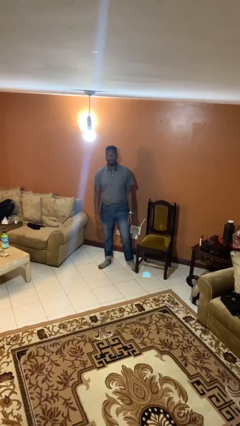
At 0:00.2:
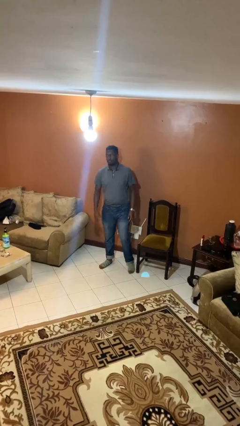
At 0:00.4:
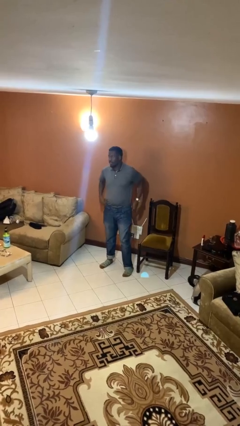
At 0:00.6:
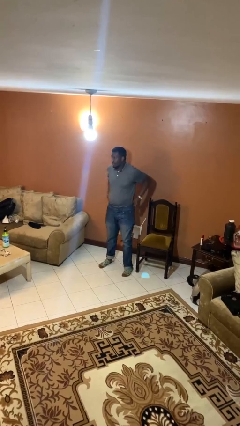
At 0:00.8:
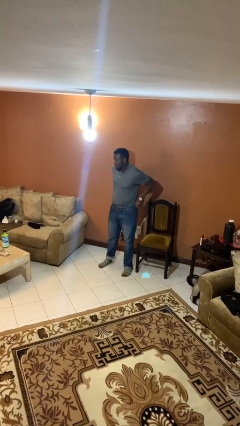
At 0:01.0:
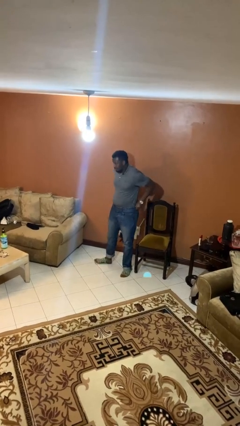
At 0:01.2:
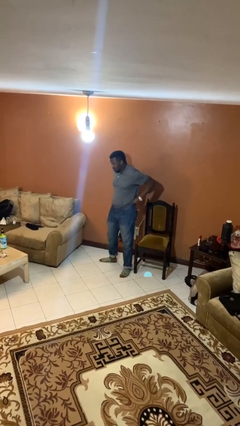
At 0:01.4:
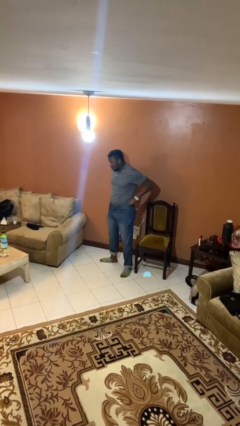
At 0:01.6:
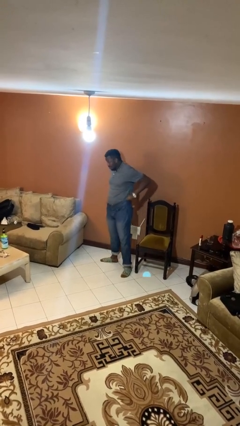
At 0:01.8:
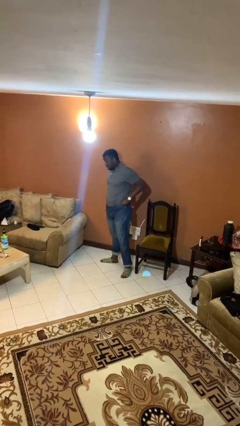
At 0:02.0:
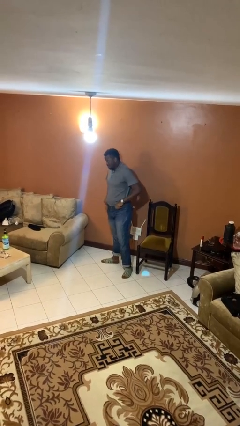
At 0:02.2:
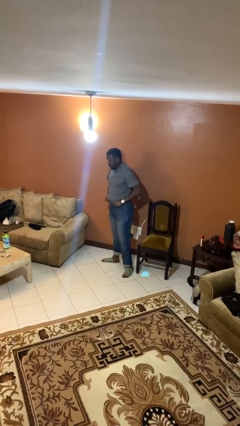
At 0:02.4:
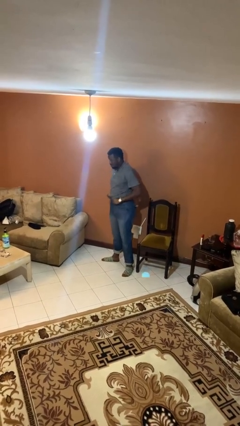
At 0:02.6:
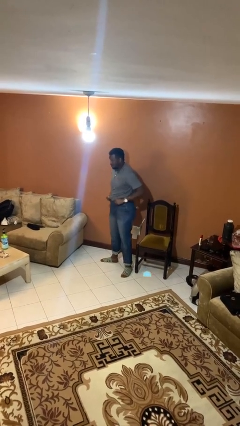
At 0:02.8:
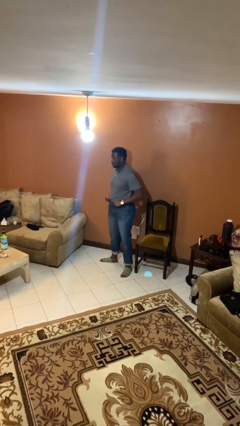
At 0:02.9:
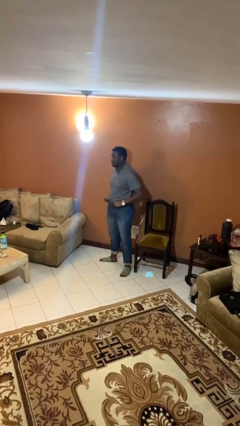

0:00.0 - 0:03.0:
person hikes up pants

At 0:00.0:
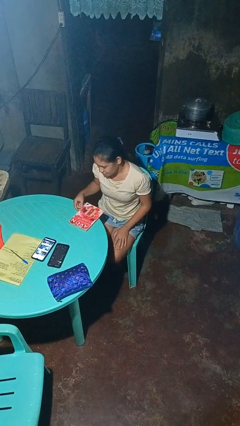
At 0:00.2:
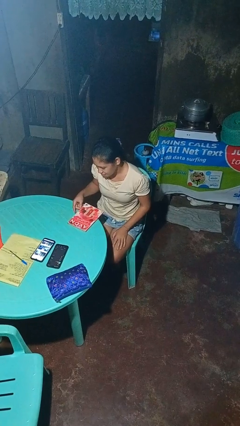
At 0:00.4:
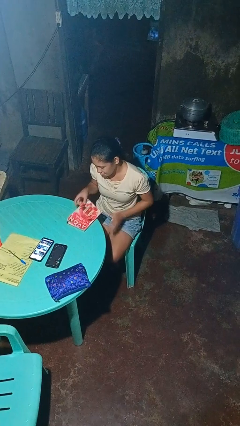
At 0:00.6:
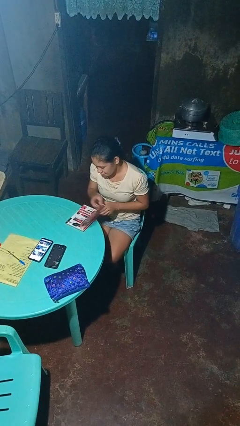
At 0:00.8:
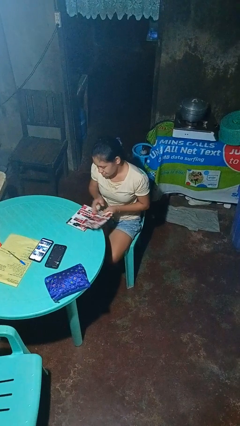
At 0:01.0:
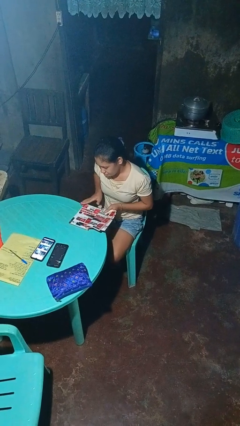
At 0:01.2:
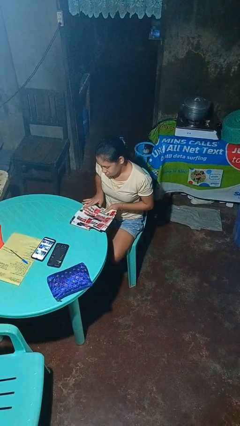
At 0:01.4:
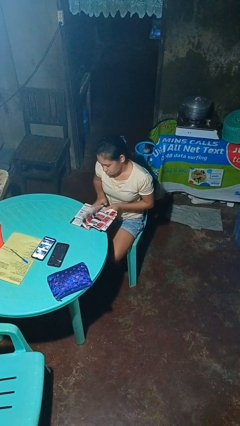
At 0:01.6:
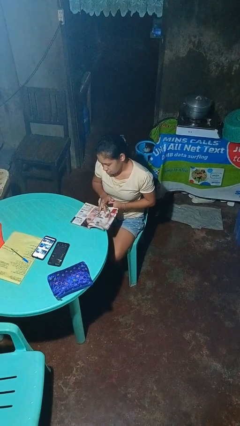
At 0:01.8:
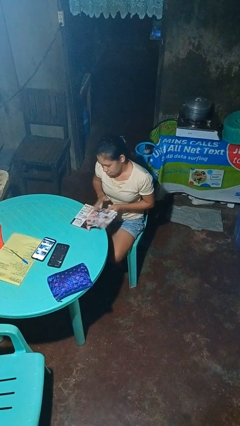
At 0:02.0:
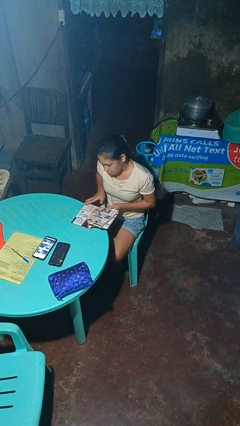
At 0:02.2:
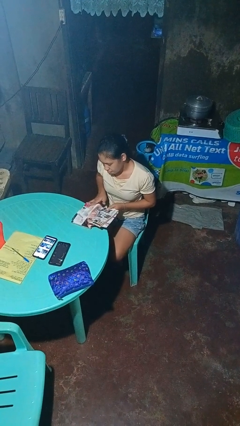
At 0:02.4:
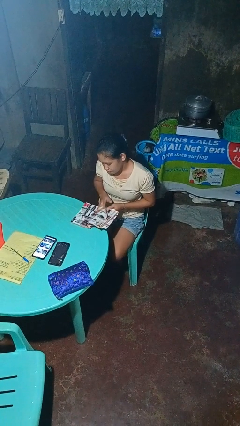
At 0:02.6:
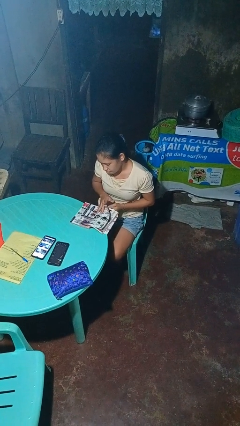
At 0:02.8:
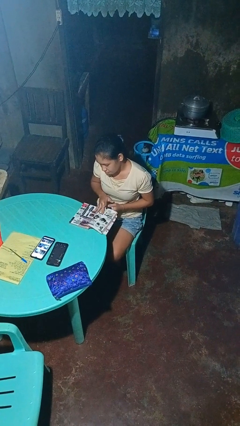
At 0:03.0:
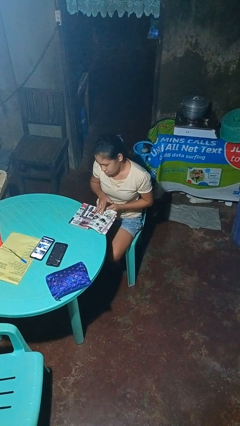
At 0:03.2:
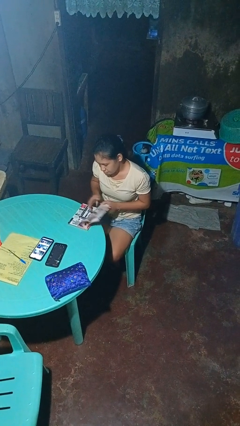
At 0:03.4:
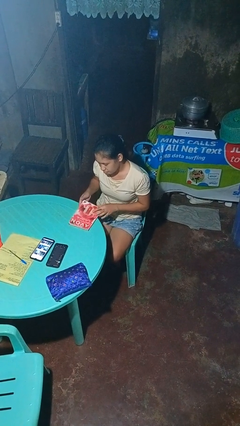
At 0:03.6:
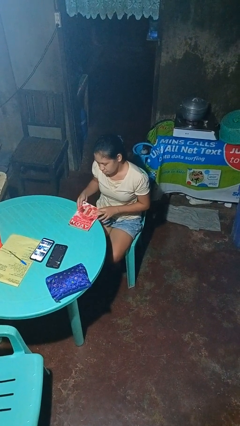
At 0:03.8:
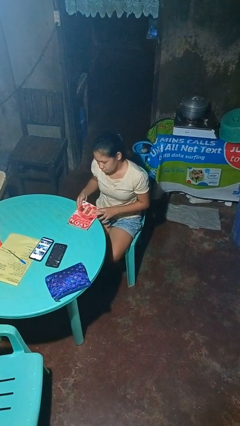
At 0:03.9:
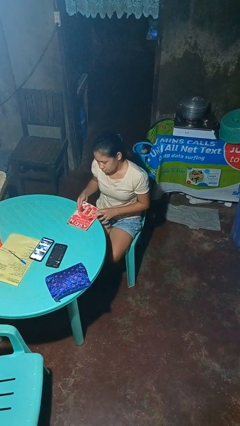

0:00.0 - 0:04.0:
person reads magazine

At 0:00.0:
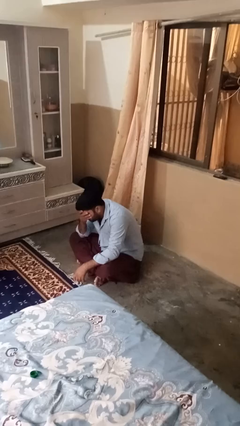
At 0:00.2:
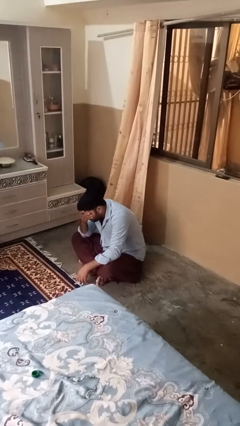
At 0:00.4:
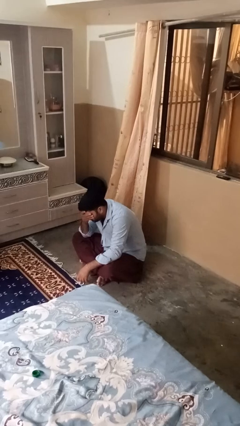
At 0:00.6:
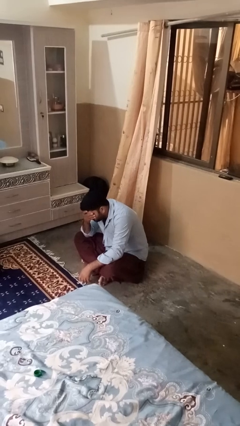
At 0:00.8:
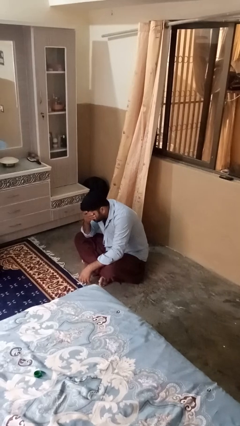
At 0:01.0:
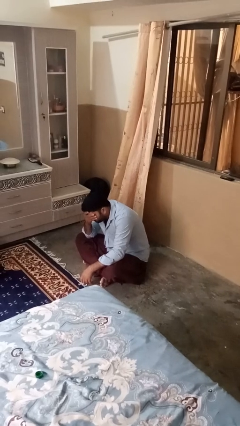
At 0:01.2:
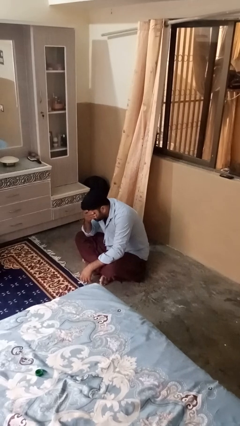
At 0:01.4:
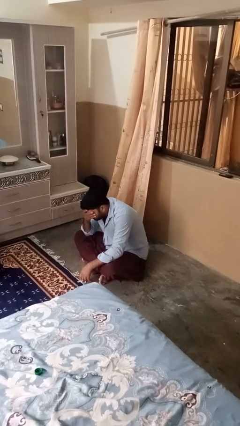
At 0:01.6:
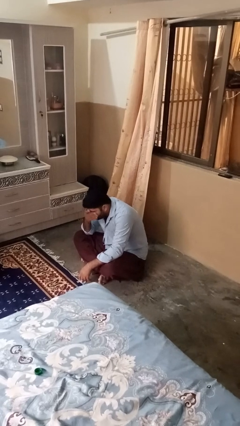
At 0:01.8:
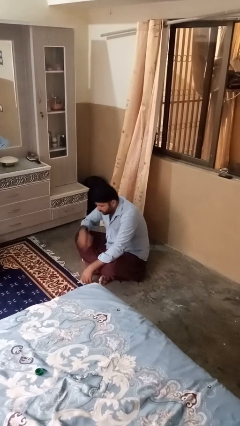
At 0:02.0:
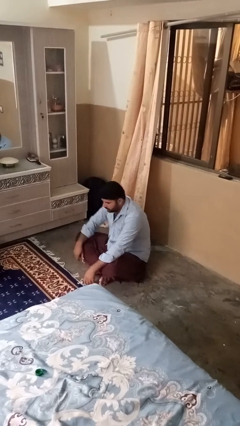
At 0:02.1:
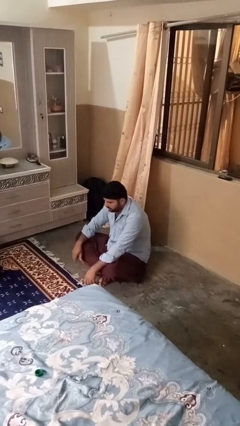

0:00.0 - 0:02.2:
person covers face with hands

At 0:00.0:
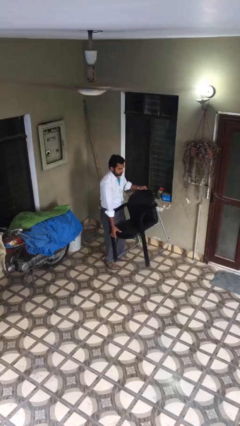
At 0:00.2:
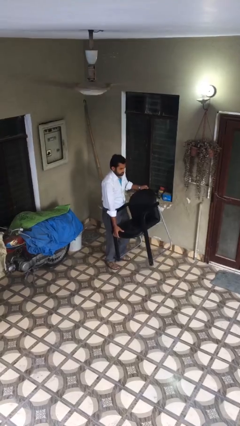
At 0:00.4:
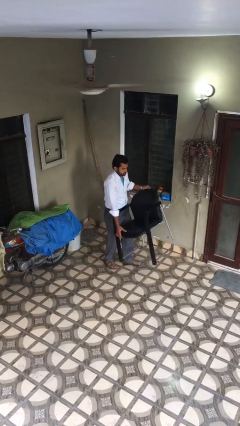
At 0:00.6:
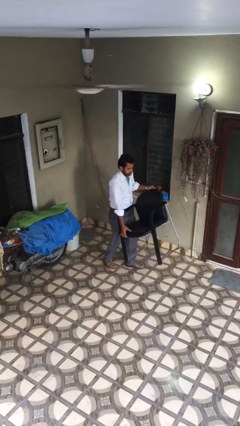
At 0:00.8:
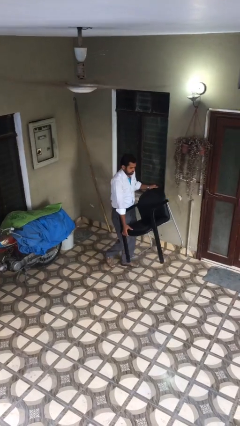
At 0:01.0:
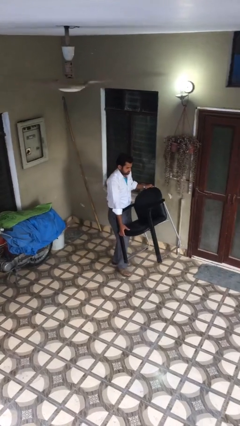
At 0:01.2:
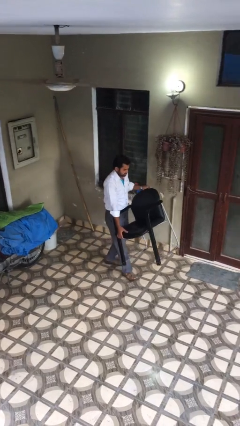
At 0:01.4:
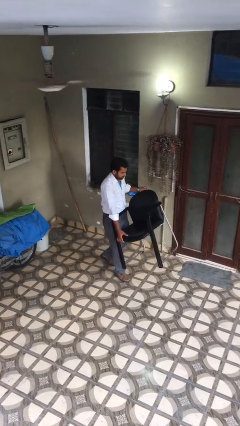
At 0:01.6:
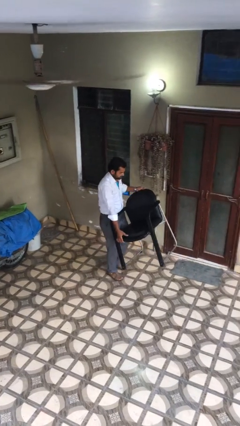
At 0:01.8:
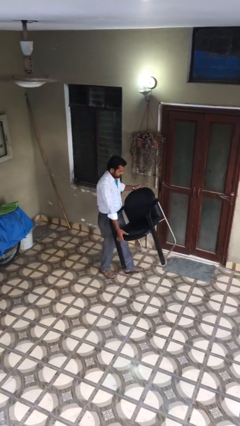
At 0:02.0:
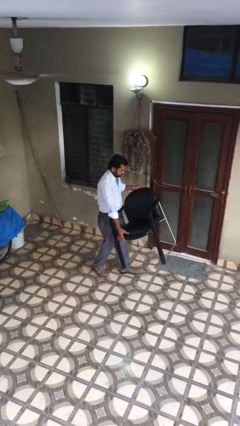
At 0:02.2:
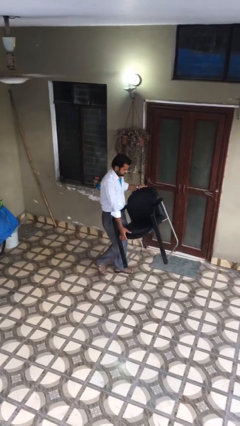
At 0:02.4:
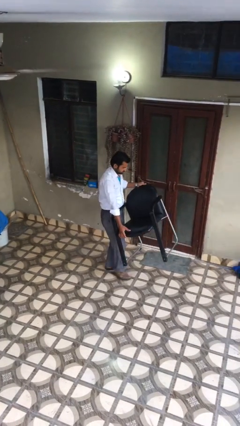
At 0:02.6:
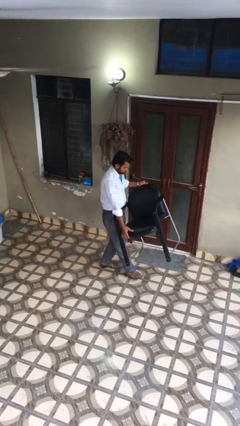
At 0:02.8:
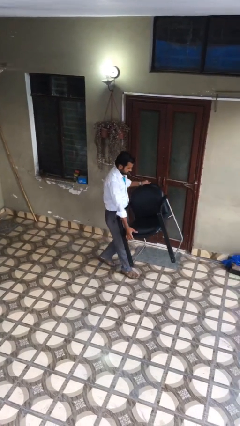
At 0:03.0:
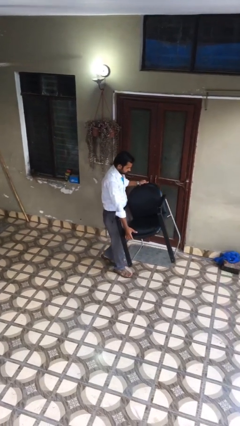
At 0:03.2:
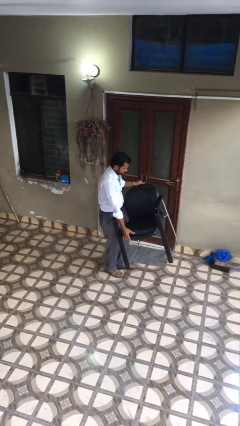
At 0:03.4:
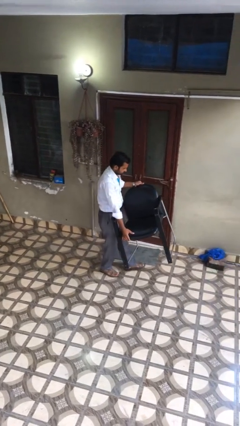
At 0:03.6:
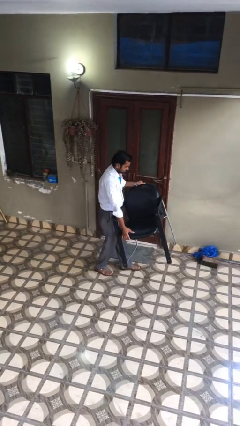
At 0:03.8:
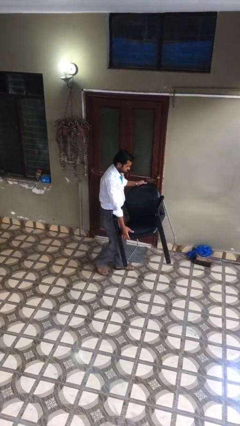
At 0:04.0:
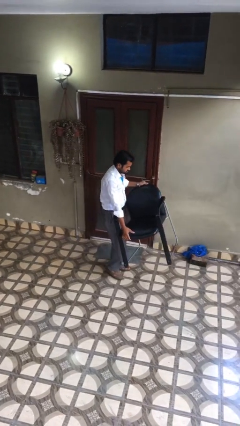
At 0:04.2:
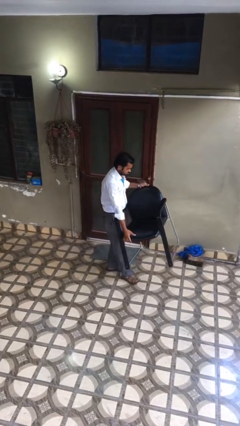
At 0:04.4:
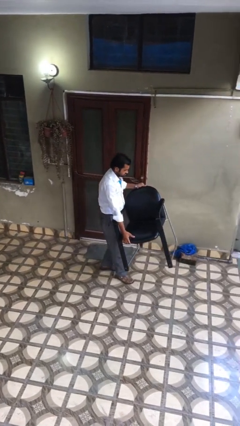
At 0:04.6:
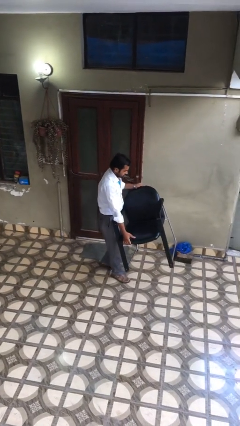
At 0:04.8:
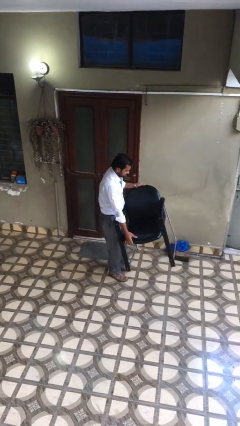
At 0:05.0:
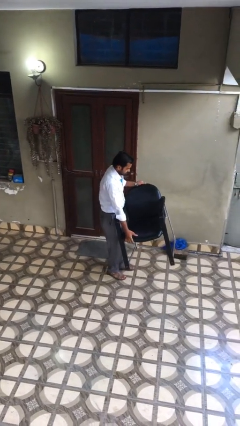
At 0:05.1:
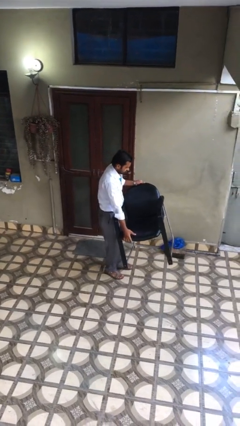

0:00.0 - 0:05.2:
person carries heavy object

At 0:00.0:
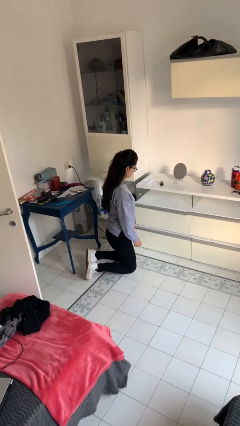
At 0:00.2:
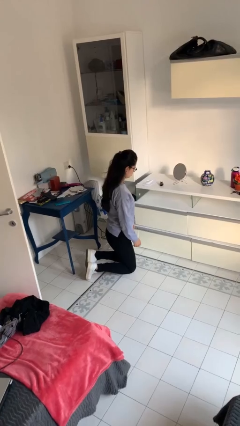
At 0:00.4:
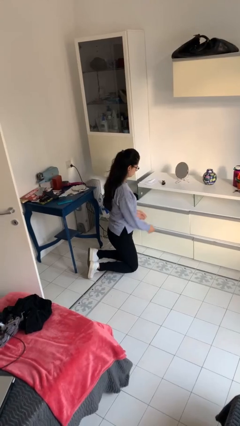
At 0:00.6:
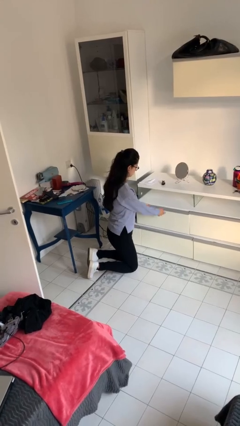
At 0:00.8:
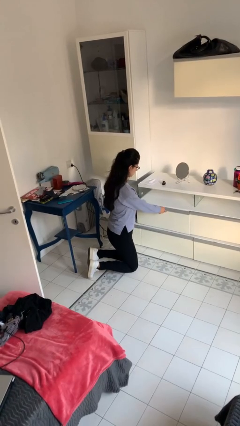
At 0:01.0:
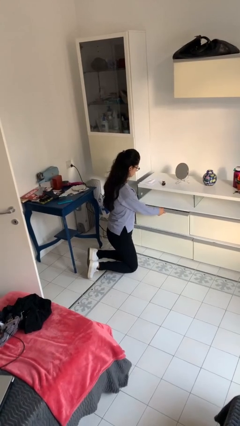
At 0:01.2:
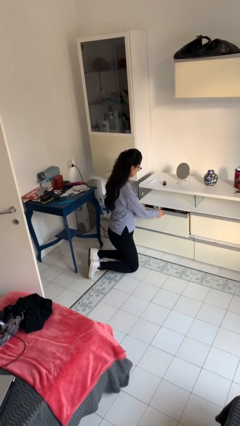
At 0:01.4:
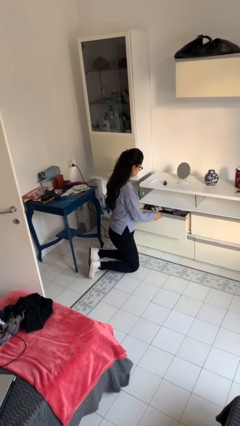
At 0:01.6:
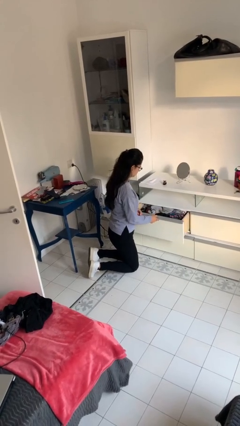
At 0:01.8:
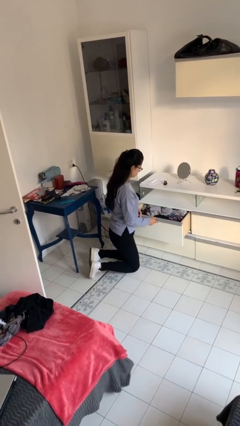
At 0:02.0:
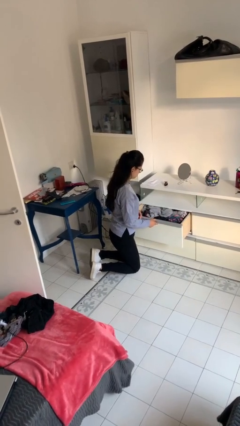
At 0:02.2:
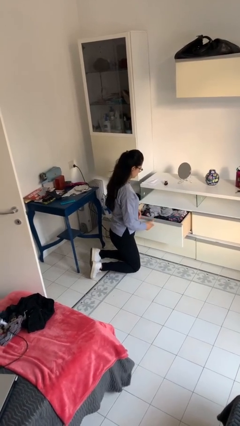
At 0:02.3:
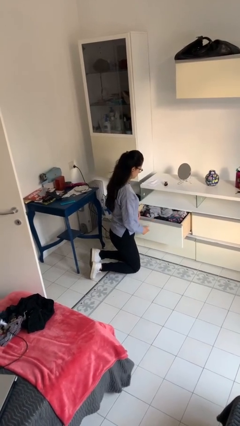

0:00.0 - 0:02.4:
person opens dresser drawer

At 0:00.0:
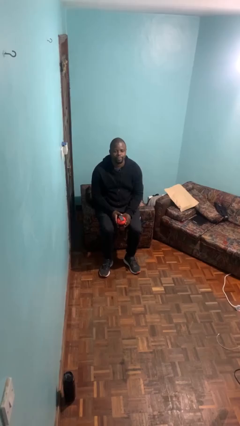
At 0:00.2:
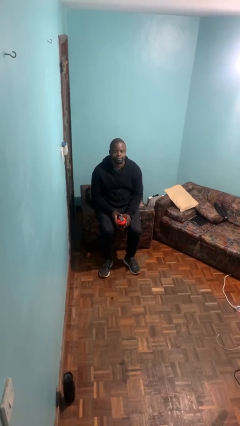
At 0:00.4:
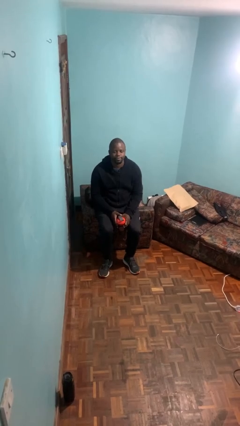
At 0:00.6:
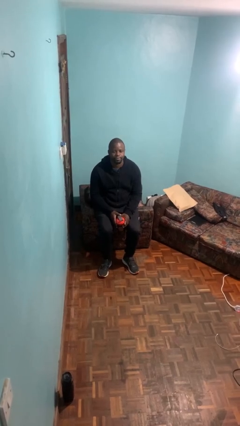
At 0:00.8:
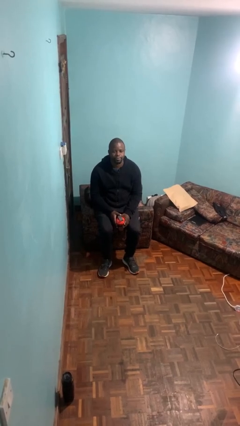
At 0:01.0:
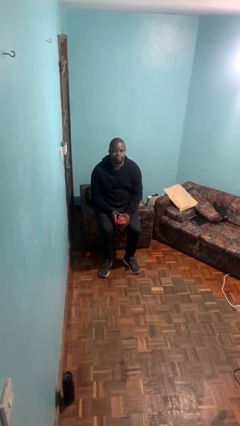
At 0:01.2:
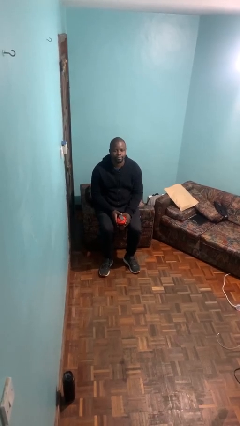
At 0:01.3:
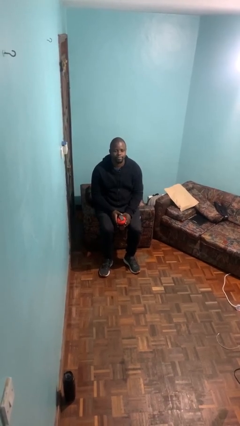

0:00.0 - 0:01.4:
person drinks from bottle
